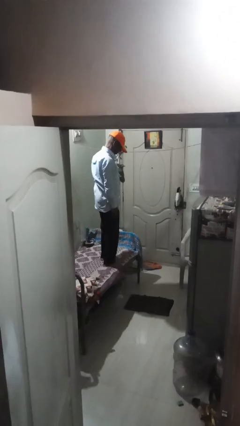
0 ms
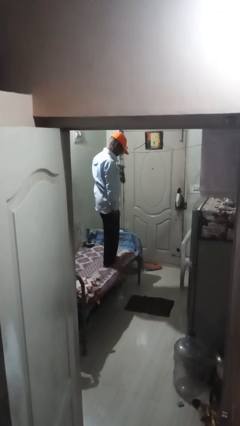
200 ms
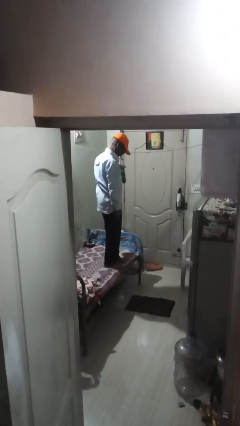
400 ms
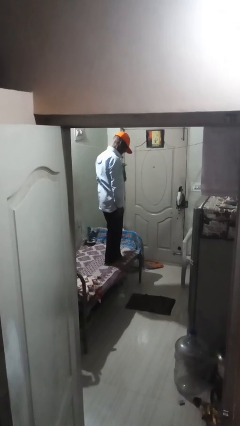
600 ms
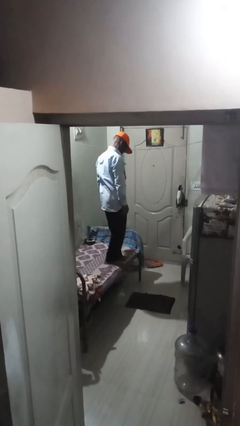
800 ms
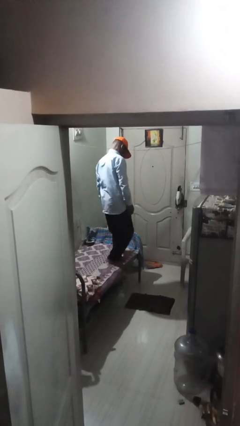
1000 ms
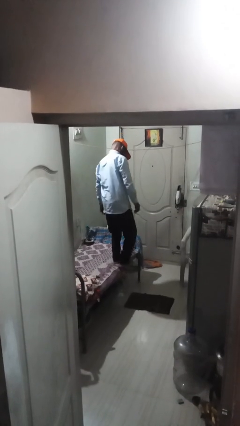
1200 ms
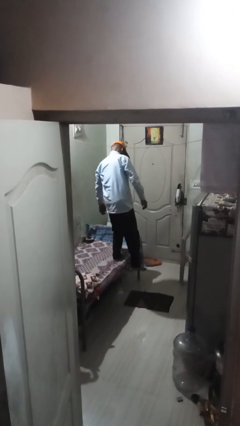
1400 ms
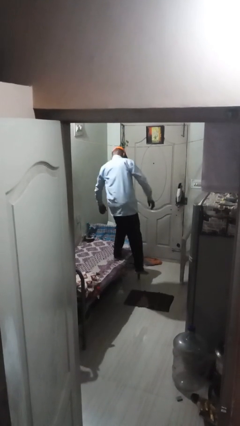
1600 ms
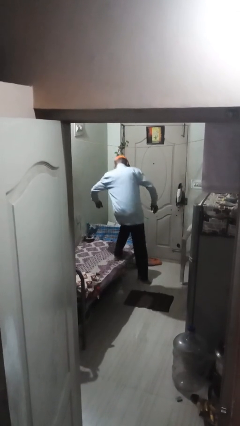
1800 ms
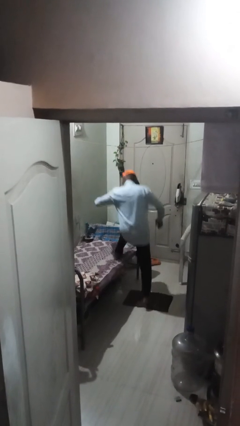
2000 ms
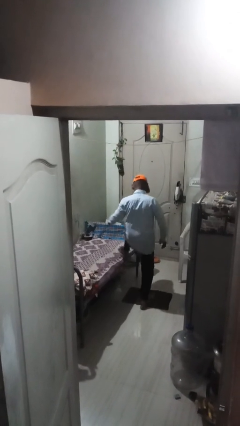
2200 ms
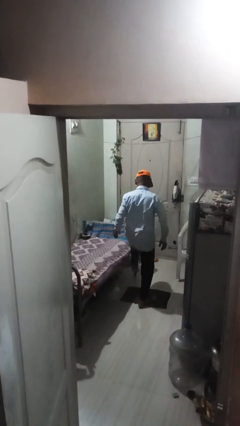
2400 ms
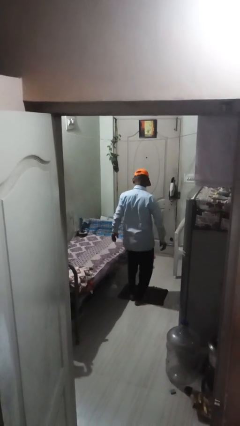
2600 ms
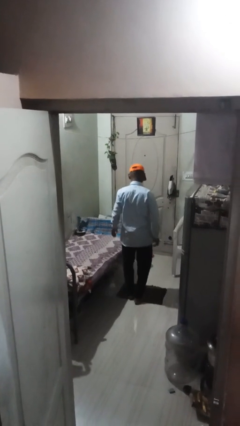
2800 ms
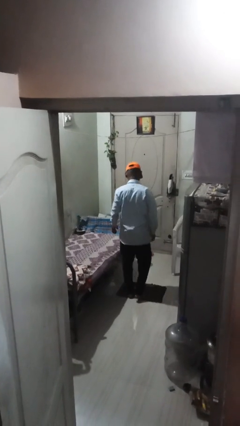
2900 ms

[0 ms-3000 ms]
person climbs off couch

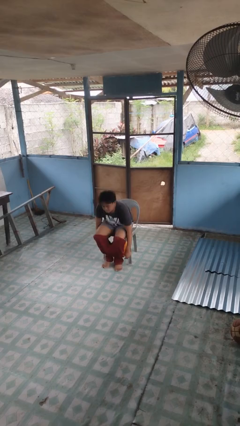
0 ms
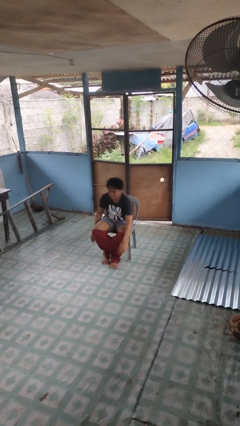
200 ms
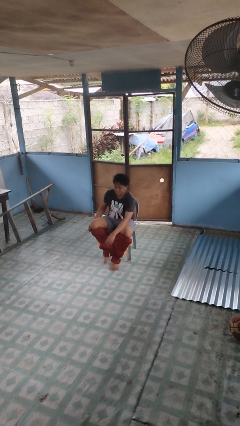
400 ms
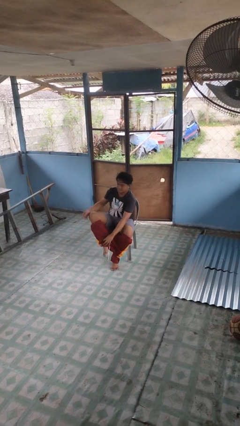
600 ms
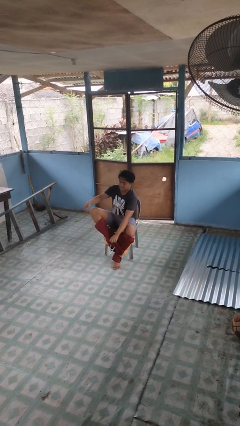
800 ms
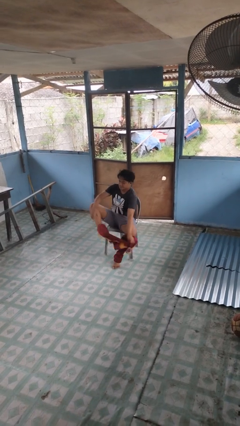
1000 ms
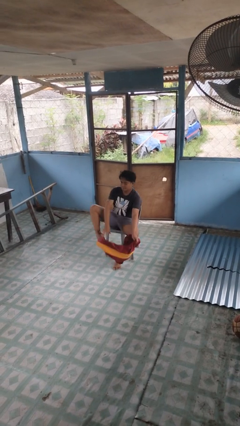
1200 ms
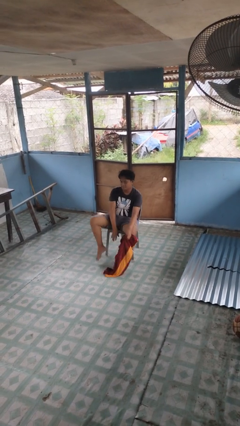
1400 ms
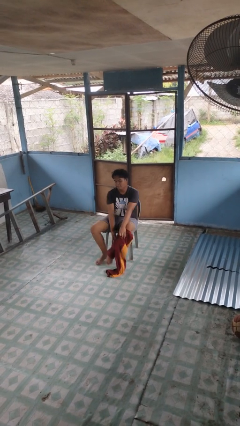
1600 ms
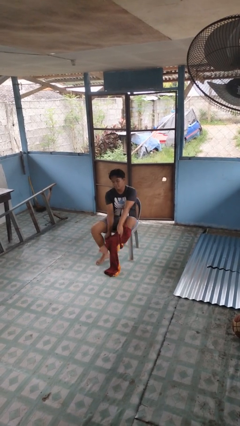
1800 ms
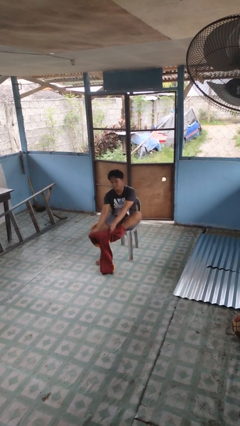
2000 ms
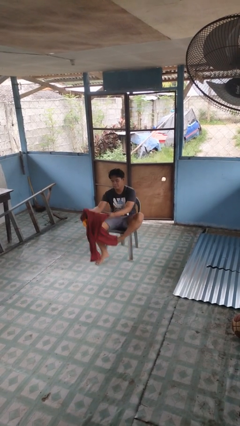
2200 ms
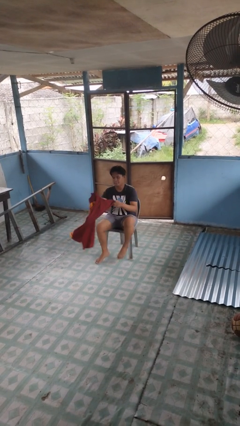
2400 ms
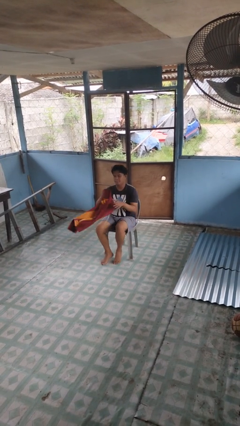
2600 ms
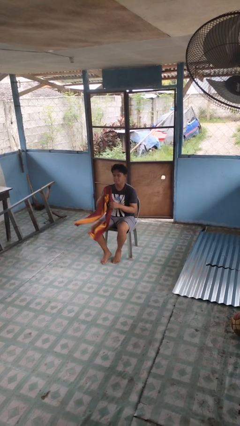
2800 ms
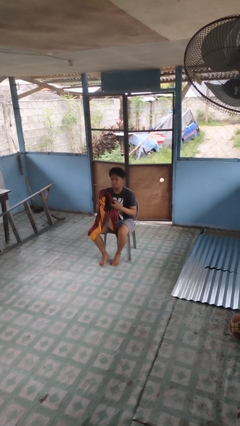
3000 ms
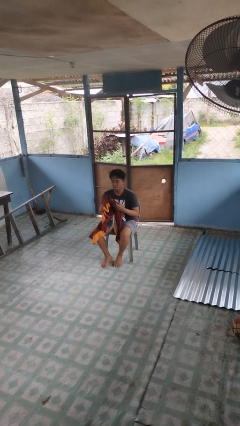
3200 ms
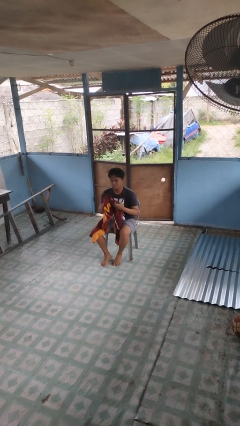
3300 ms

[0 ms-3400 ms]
person takes off pants

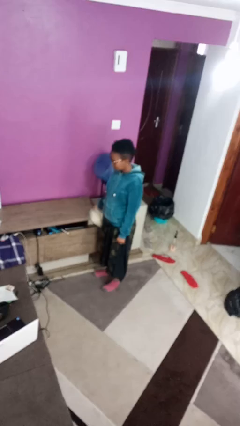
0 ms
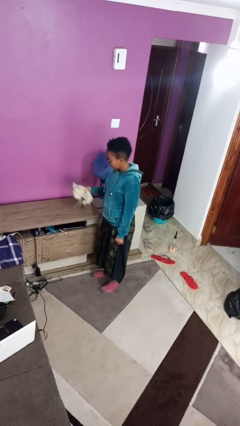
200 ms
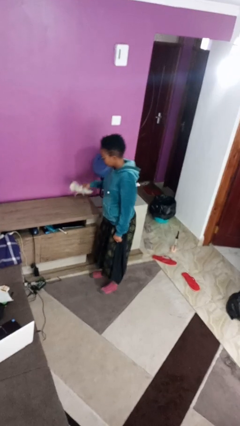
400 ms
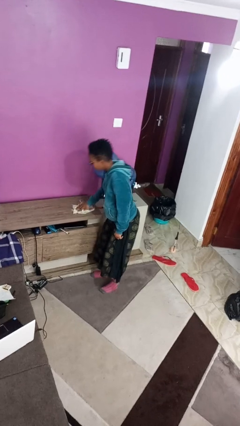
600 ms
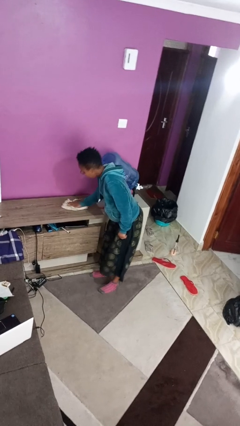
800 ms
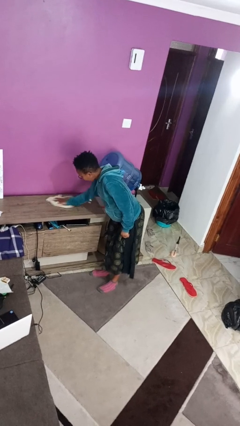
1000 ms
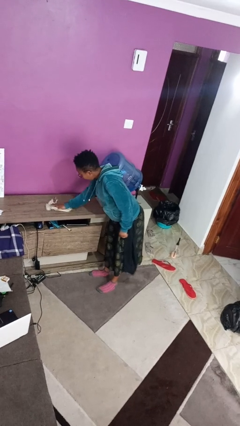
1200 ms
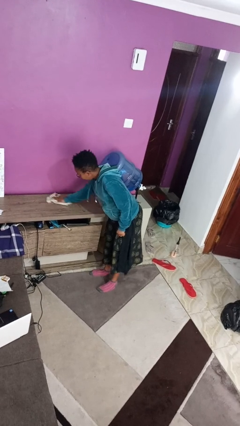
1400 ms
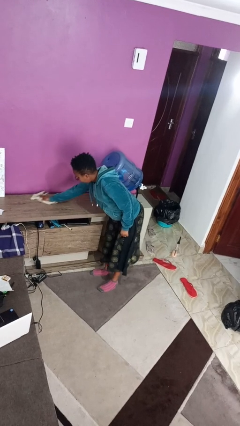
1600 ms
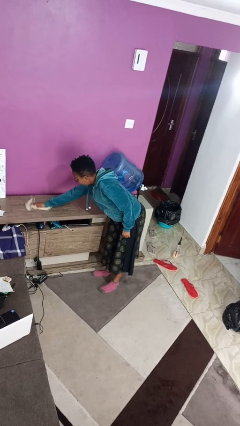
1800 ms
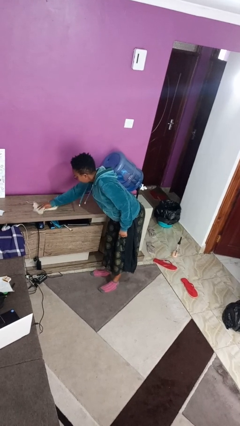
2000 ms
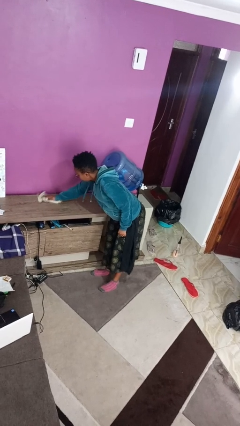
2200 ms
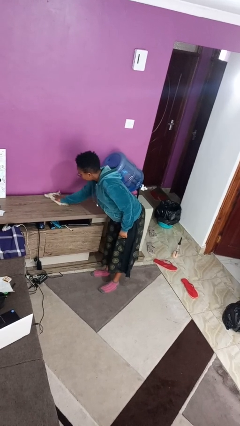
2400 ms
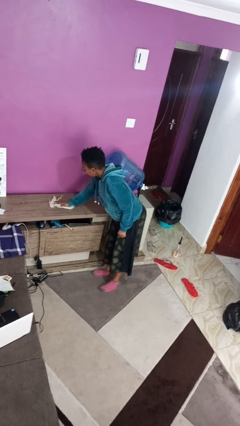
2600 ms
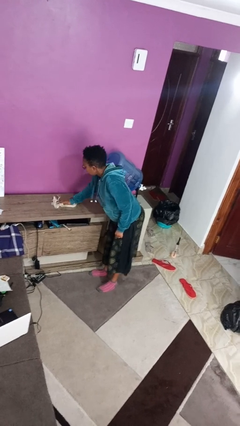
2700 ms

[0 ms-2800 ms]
person cleans table with rag

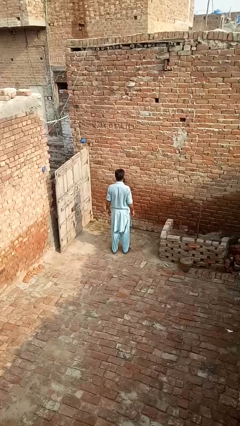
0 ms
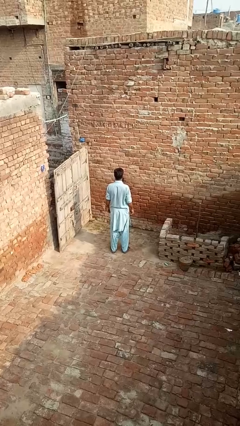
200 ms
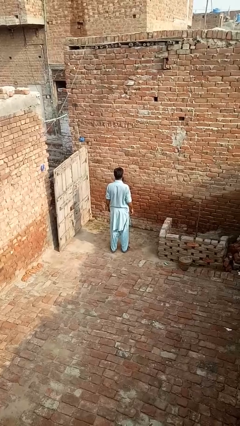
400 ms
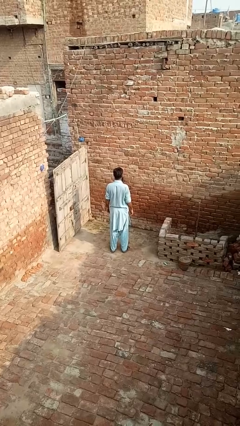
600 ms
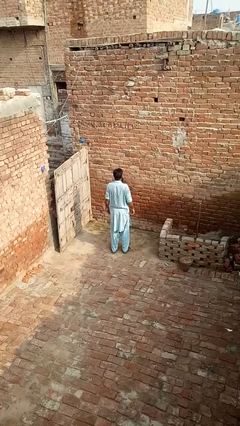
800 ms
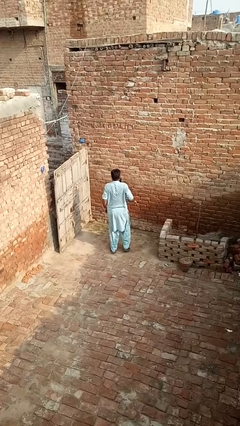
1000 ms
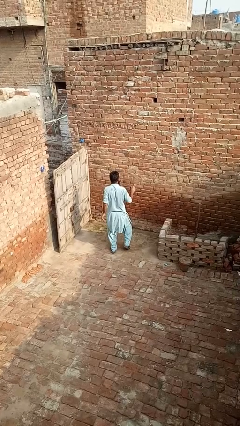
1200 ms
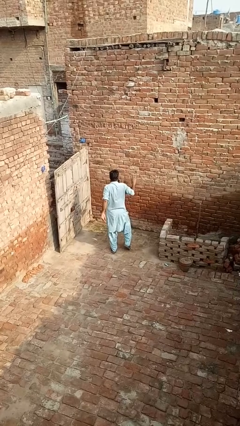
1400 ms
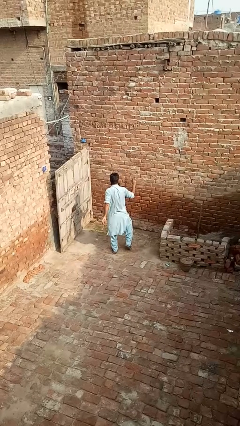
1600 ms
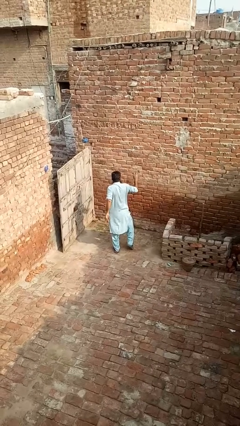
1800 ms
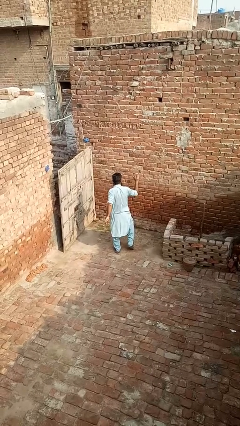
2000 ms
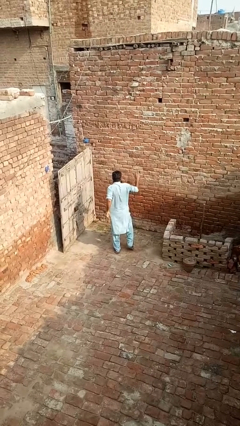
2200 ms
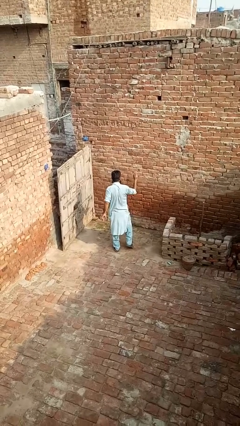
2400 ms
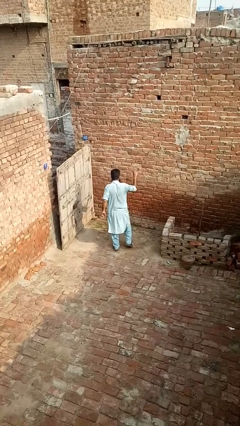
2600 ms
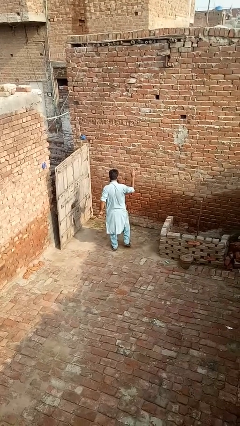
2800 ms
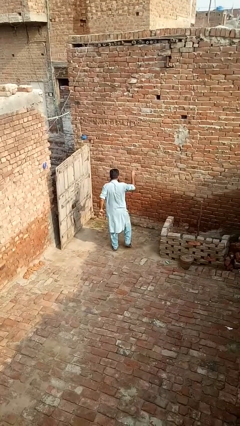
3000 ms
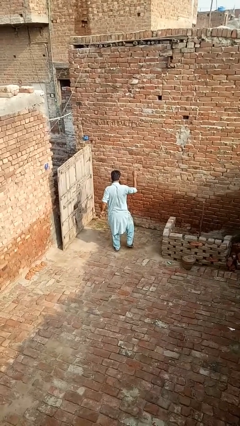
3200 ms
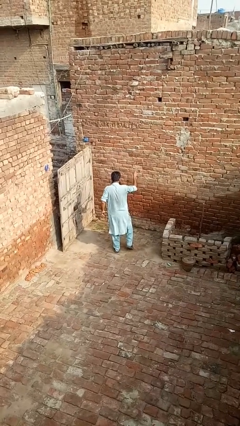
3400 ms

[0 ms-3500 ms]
person dances in place

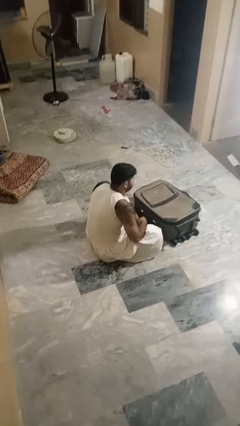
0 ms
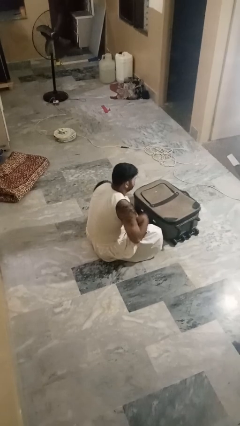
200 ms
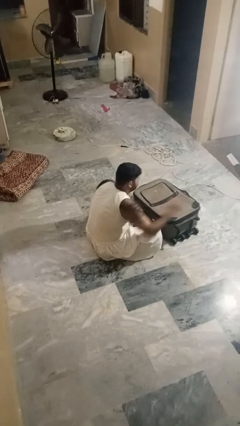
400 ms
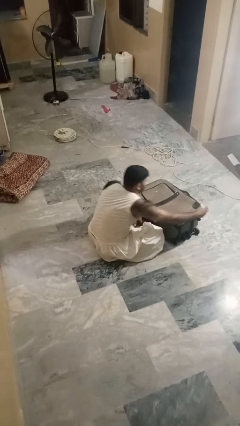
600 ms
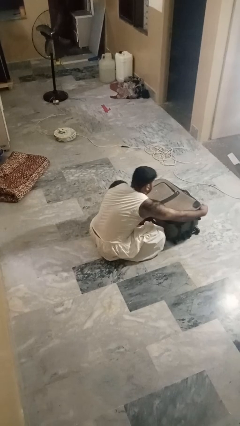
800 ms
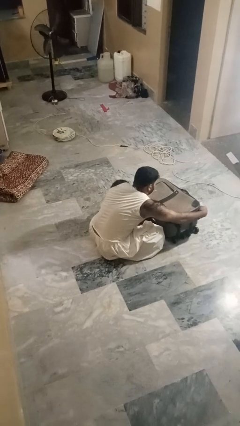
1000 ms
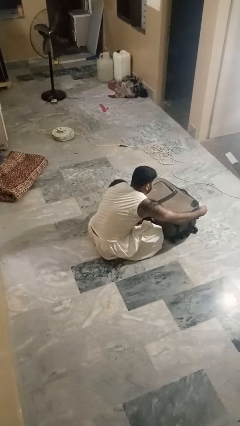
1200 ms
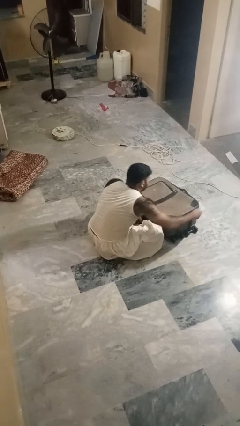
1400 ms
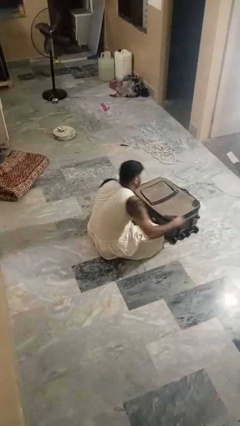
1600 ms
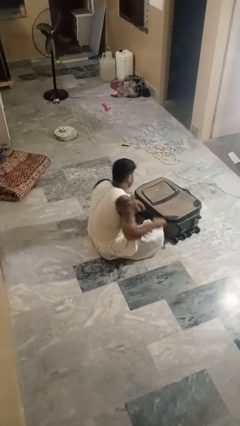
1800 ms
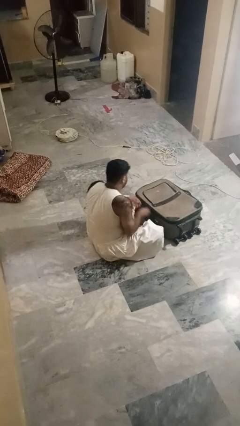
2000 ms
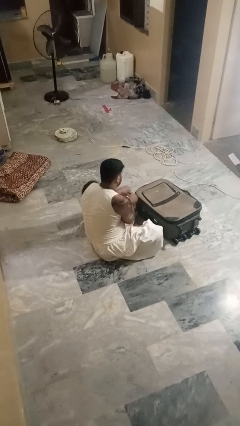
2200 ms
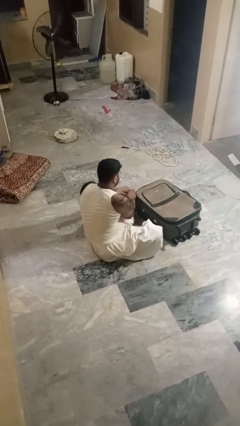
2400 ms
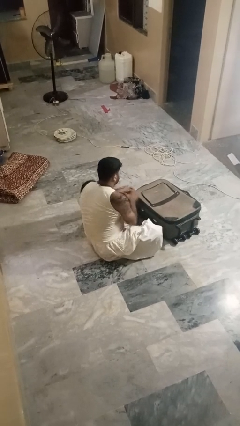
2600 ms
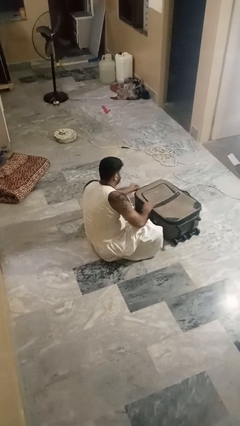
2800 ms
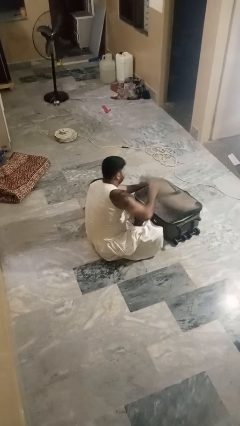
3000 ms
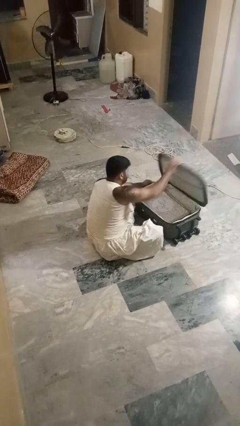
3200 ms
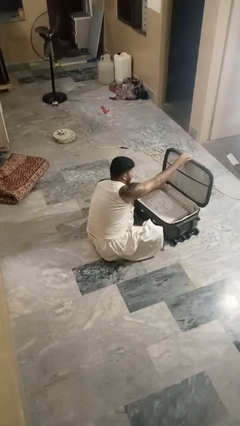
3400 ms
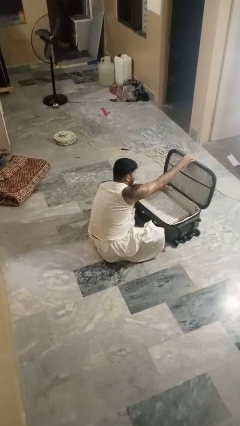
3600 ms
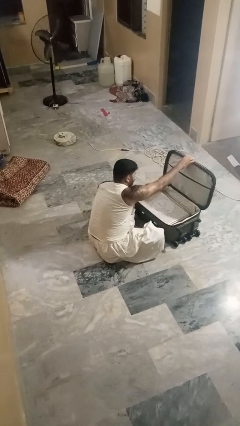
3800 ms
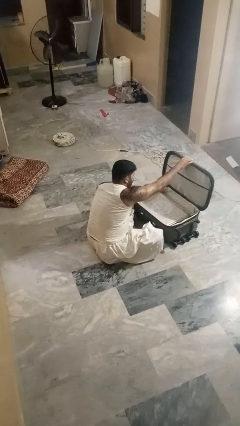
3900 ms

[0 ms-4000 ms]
person opens suitcase

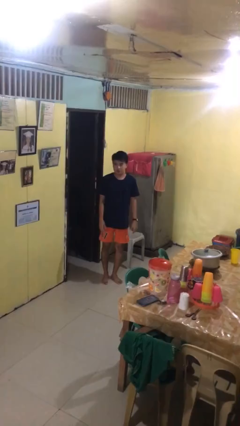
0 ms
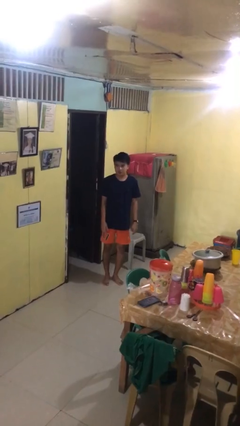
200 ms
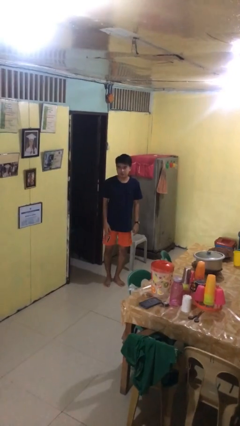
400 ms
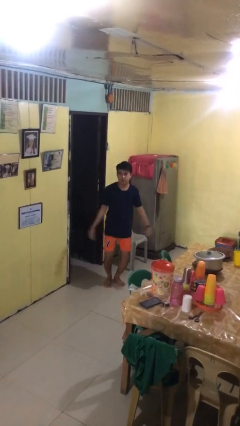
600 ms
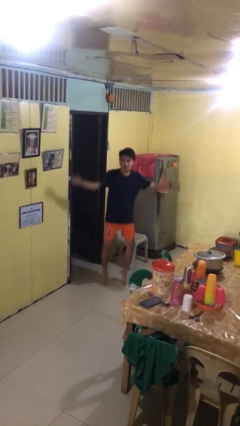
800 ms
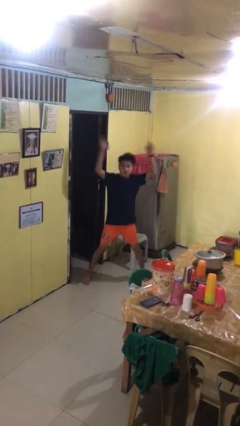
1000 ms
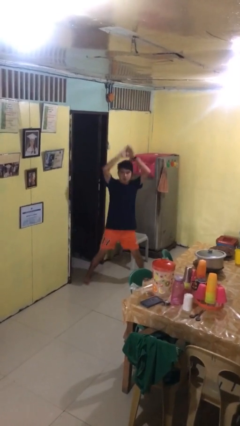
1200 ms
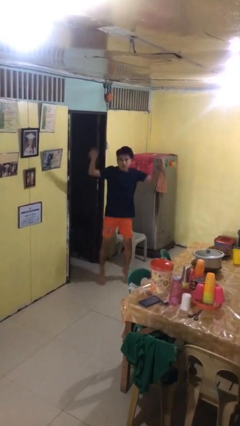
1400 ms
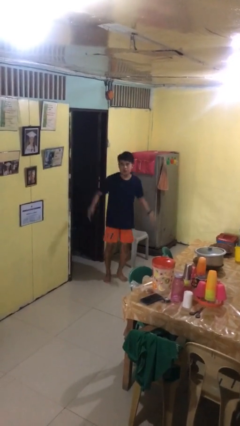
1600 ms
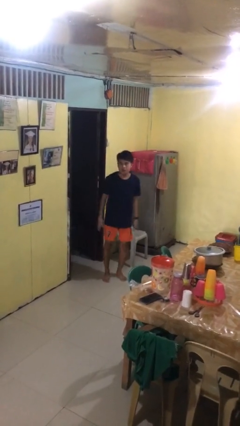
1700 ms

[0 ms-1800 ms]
person exercises with jumping jacks
